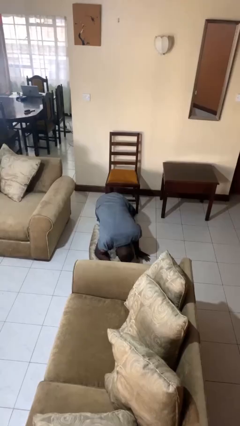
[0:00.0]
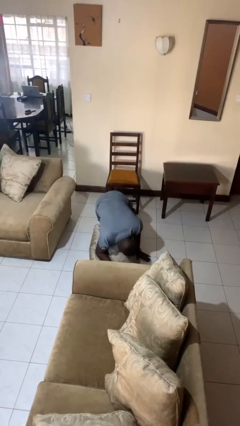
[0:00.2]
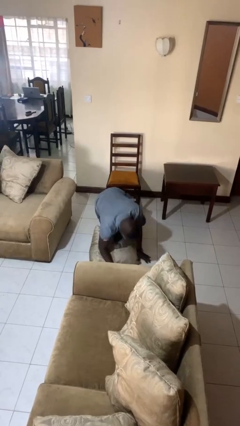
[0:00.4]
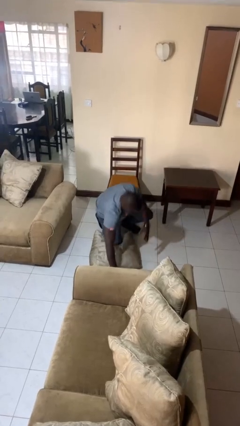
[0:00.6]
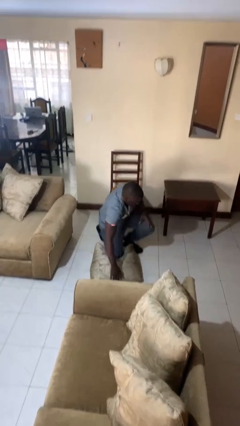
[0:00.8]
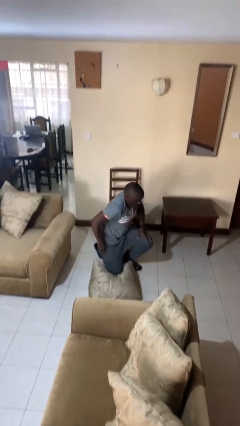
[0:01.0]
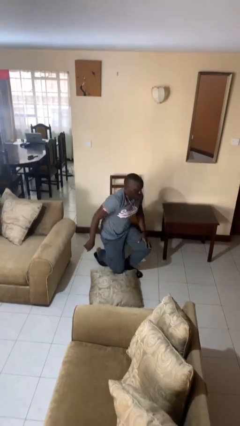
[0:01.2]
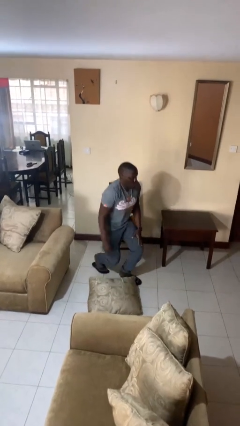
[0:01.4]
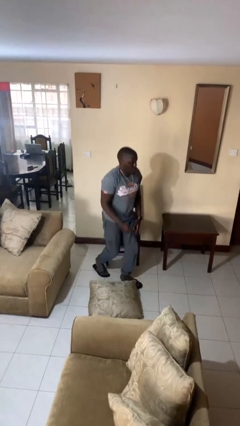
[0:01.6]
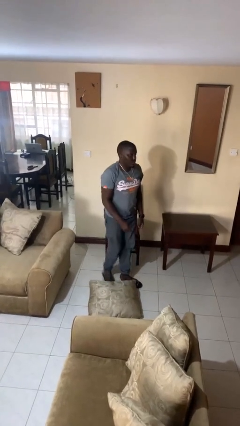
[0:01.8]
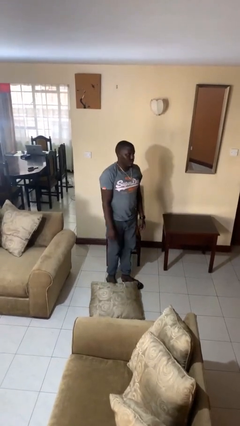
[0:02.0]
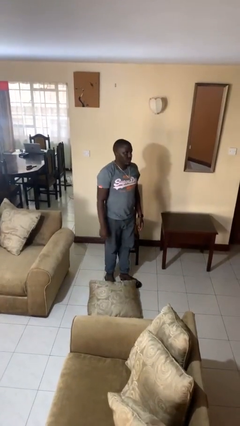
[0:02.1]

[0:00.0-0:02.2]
person stands up from floor

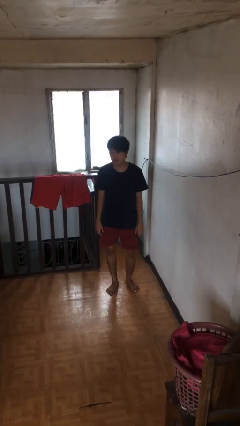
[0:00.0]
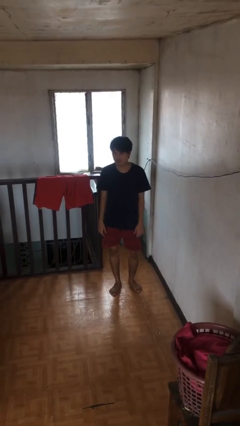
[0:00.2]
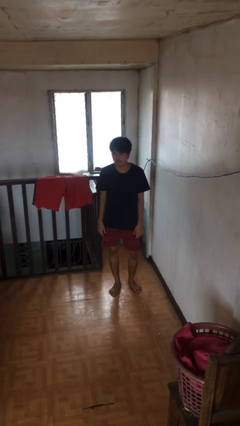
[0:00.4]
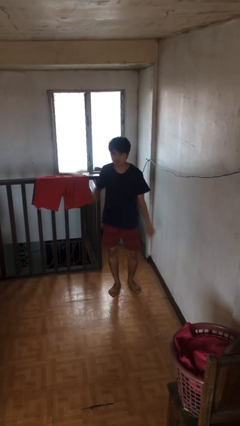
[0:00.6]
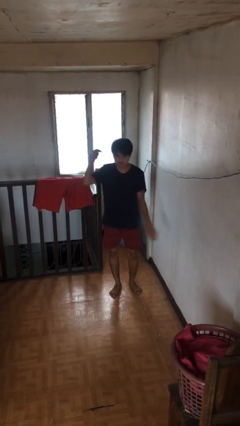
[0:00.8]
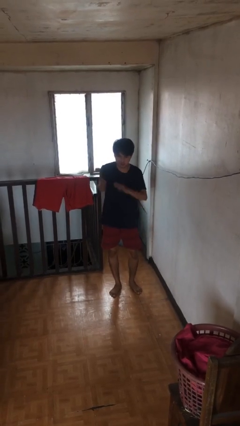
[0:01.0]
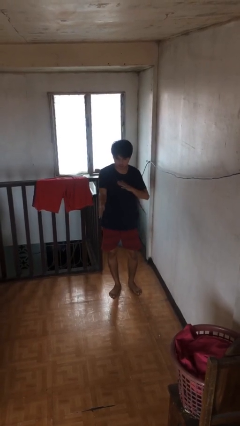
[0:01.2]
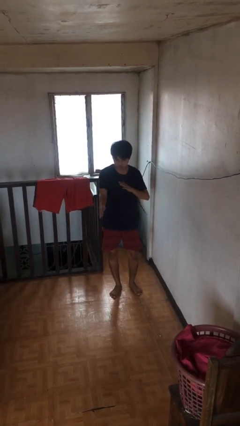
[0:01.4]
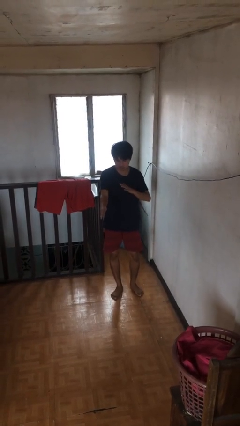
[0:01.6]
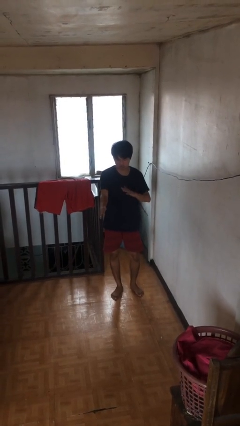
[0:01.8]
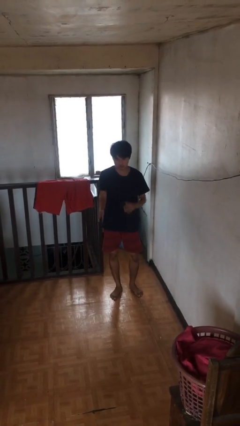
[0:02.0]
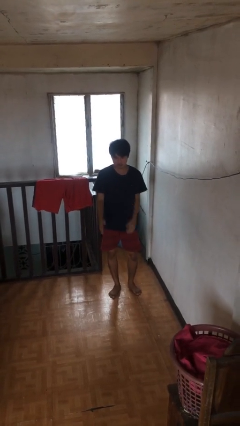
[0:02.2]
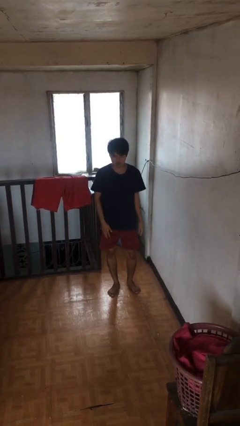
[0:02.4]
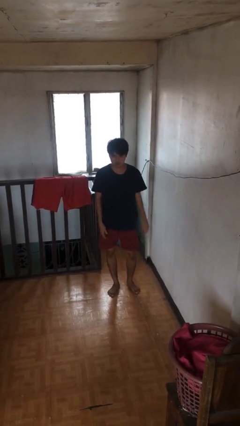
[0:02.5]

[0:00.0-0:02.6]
person karate chop

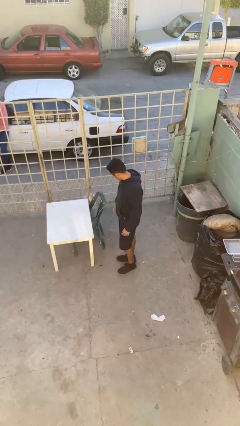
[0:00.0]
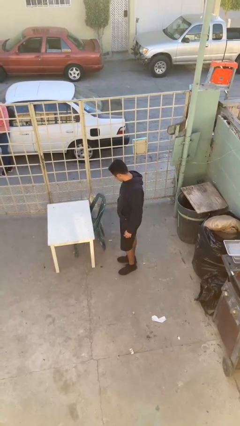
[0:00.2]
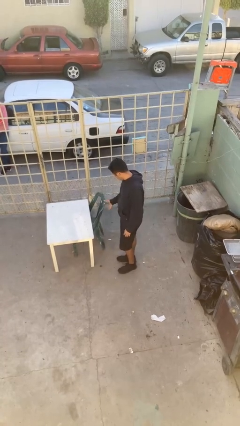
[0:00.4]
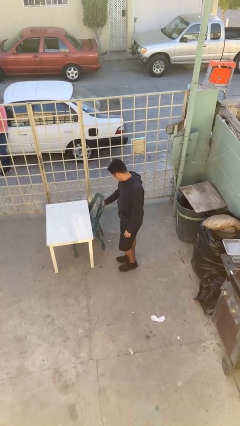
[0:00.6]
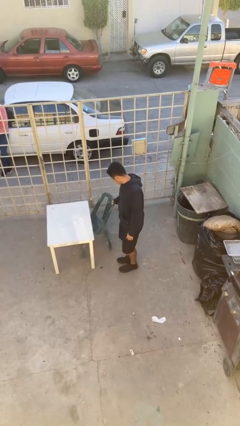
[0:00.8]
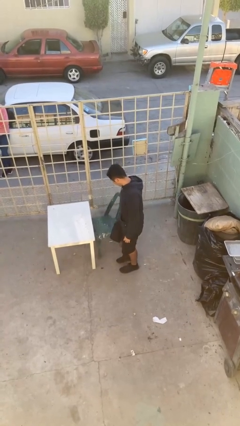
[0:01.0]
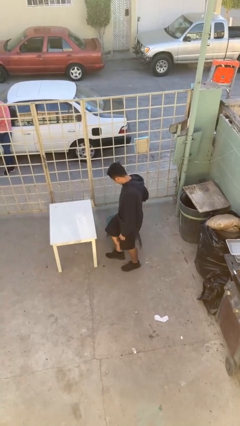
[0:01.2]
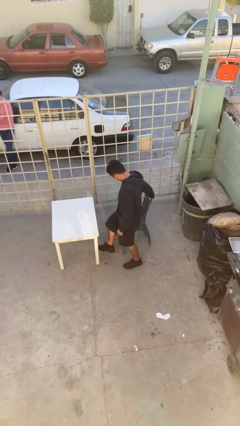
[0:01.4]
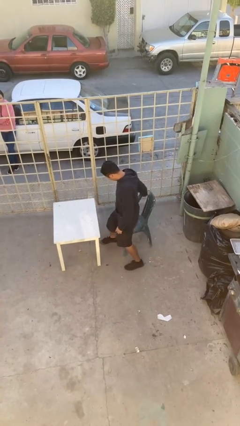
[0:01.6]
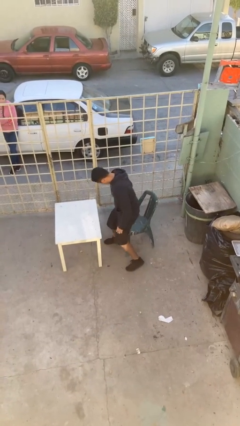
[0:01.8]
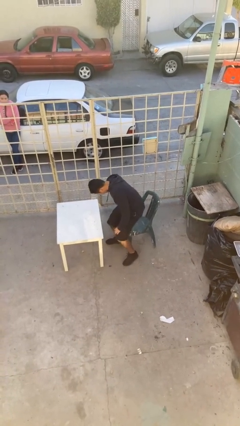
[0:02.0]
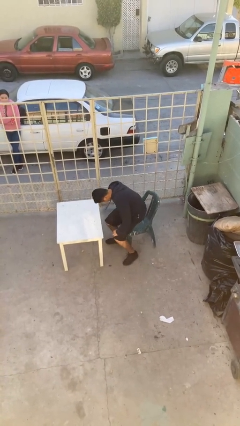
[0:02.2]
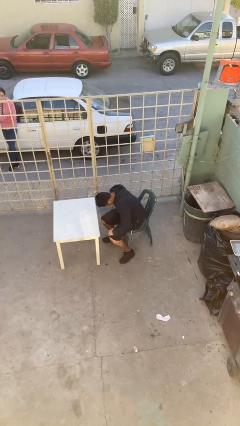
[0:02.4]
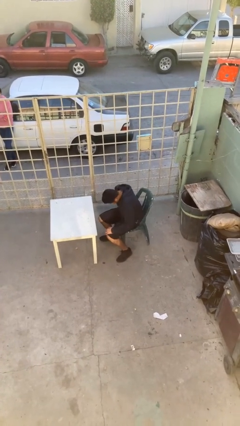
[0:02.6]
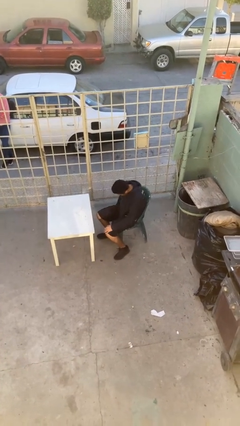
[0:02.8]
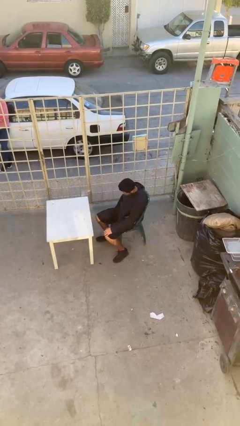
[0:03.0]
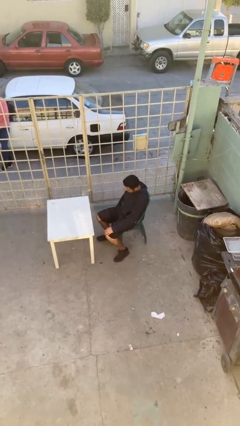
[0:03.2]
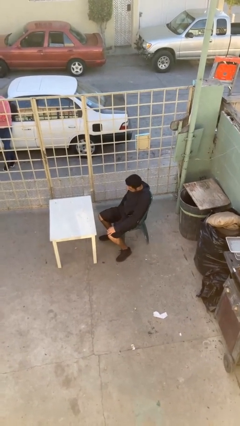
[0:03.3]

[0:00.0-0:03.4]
person sits down

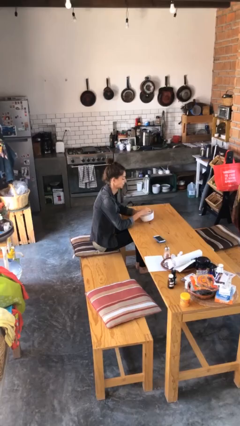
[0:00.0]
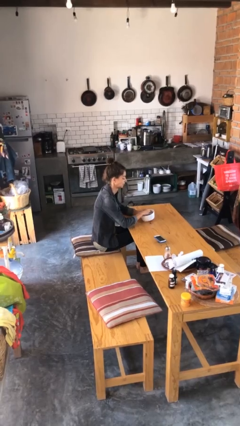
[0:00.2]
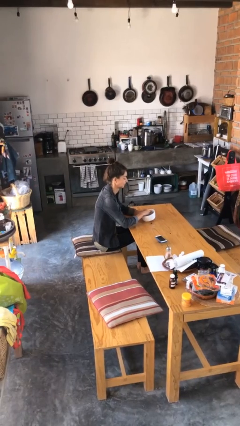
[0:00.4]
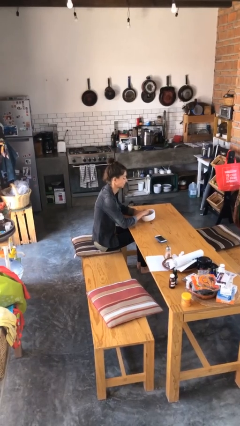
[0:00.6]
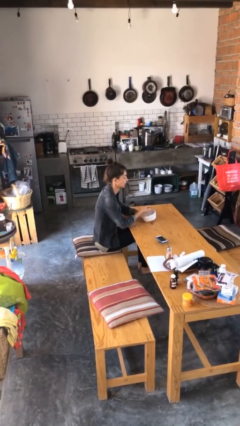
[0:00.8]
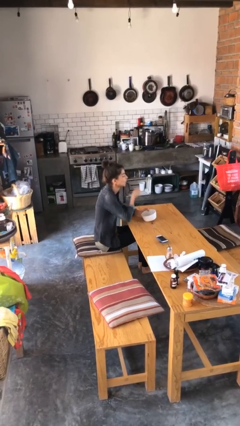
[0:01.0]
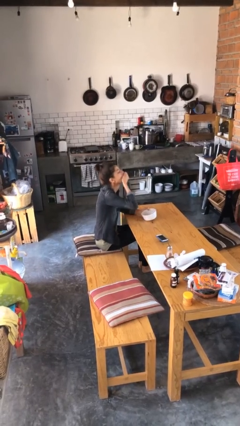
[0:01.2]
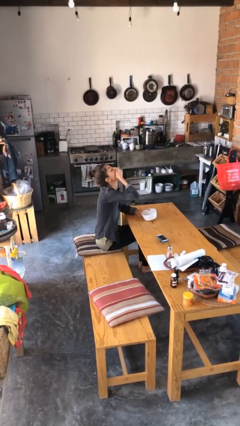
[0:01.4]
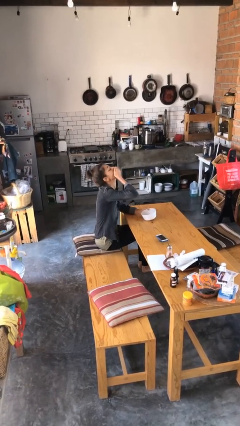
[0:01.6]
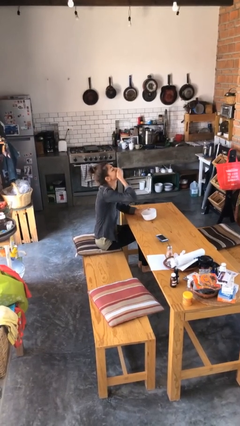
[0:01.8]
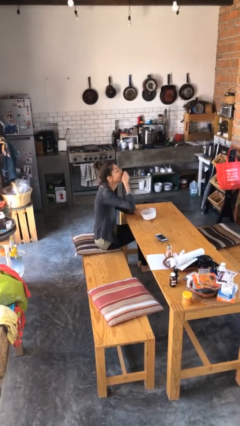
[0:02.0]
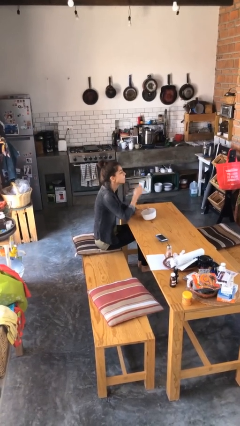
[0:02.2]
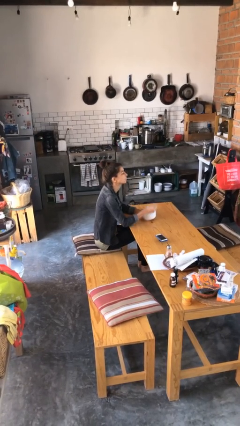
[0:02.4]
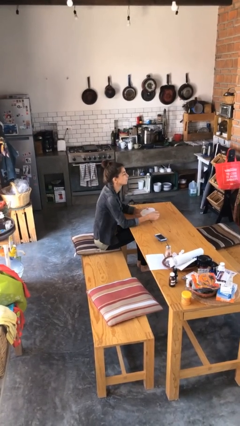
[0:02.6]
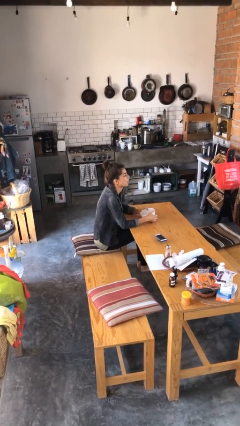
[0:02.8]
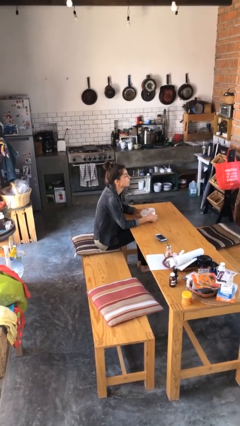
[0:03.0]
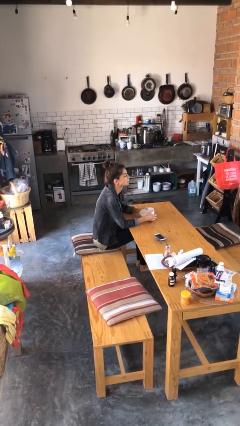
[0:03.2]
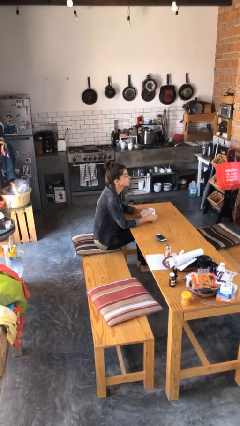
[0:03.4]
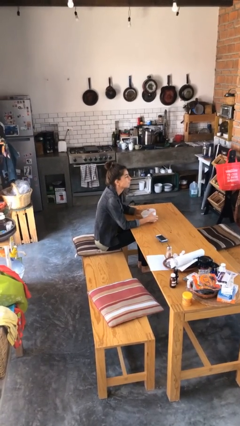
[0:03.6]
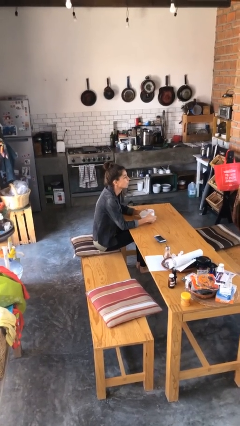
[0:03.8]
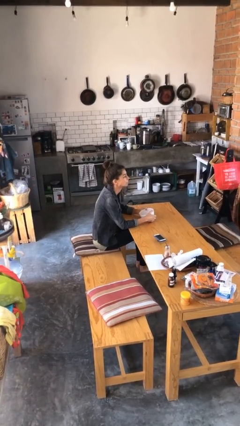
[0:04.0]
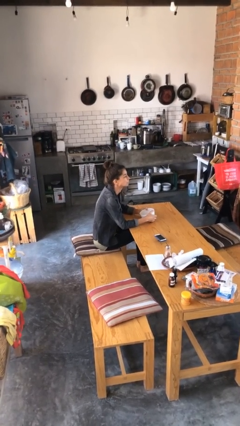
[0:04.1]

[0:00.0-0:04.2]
person eats with hands

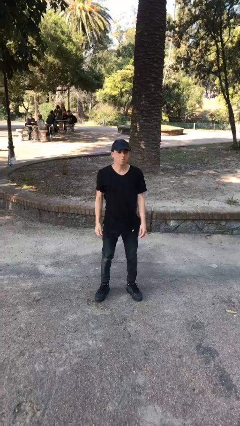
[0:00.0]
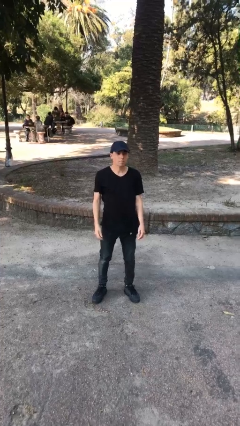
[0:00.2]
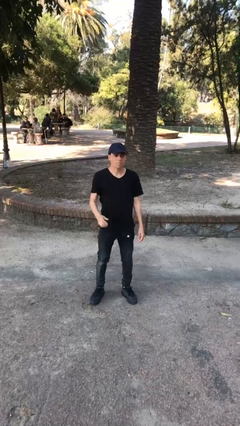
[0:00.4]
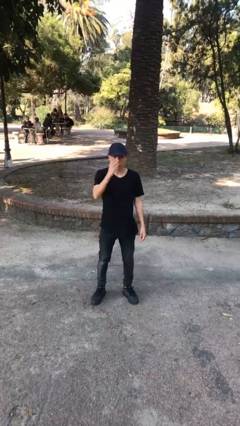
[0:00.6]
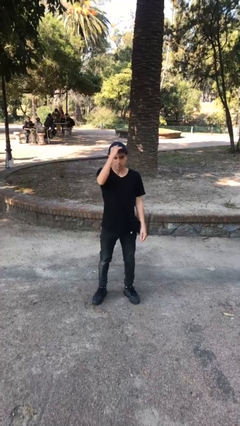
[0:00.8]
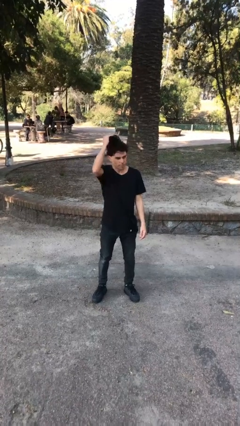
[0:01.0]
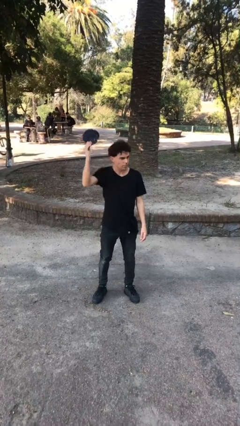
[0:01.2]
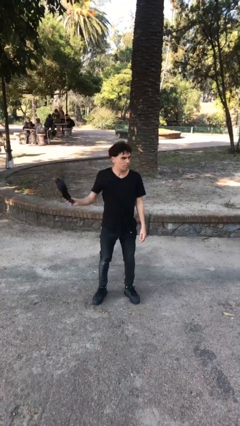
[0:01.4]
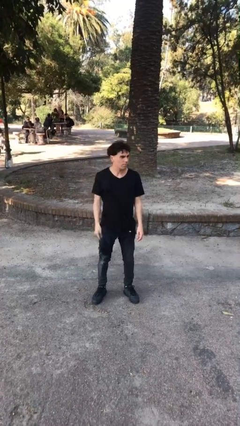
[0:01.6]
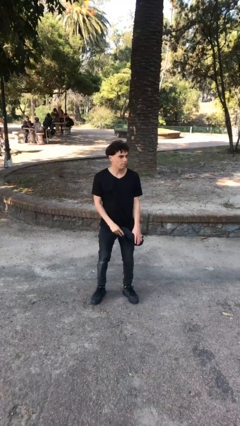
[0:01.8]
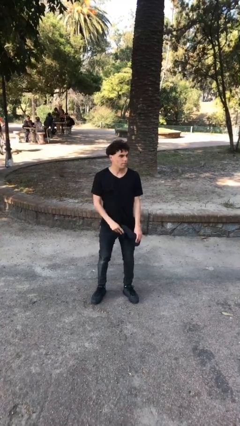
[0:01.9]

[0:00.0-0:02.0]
person takes off hat

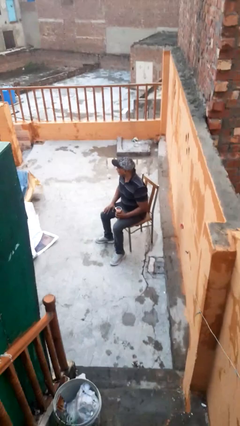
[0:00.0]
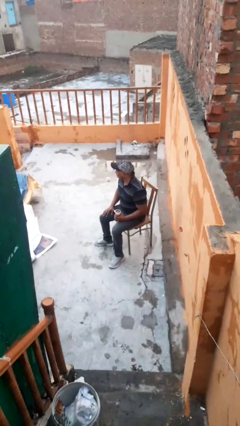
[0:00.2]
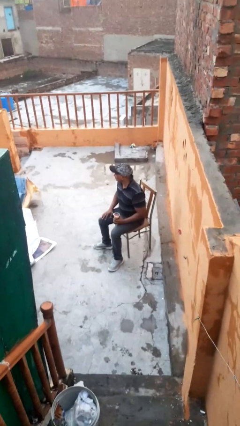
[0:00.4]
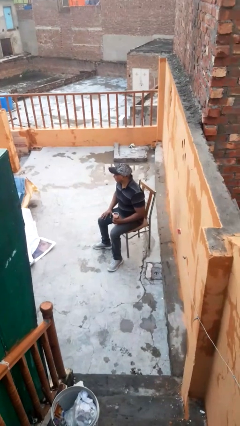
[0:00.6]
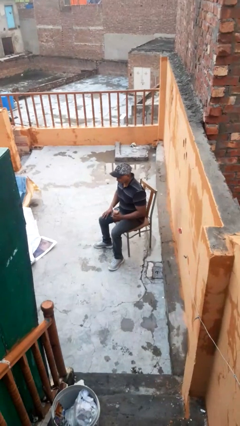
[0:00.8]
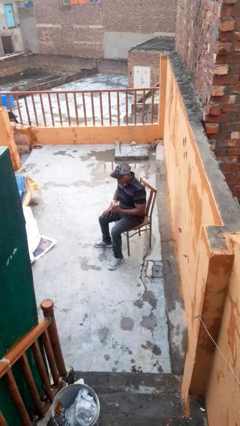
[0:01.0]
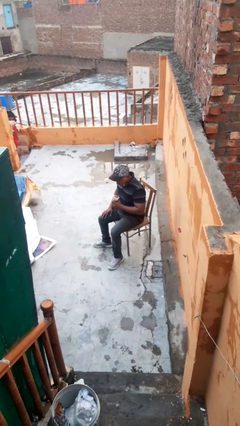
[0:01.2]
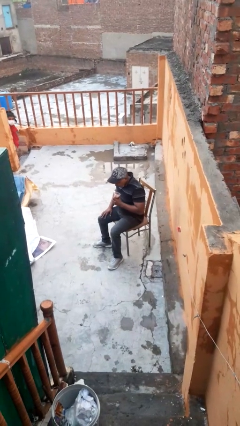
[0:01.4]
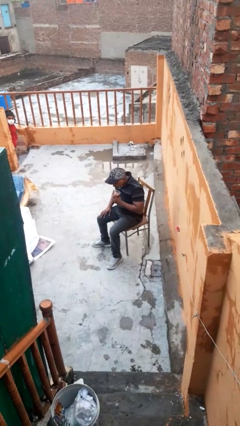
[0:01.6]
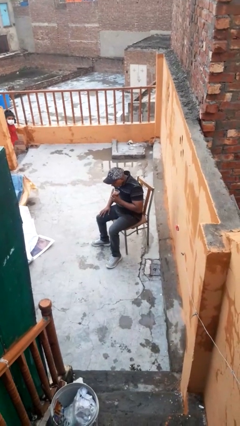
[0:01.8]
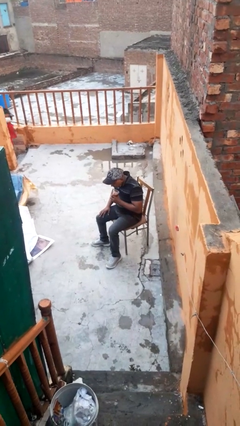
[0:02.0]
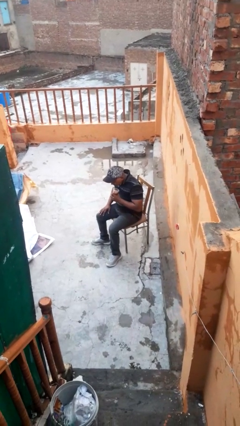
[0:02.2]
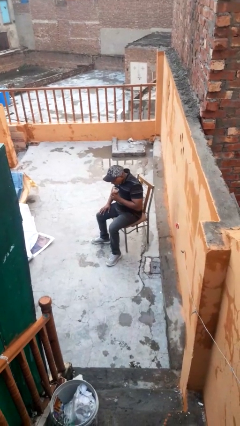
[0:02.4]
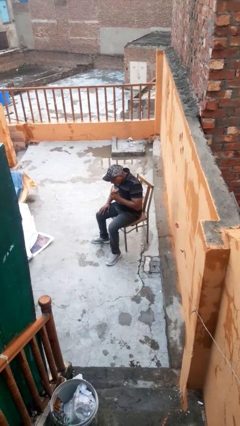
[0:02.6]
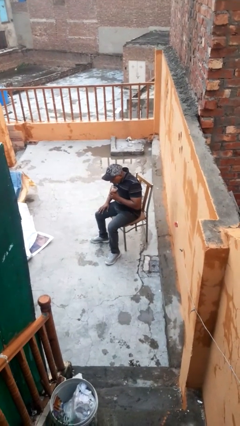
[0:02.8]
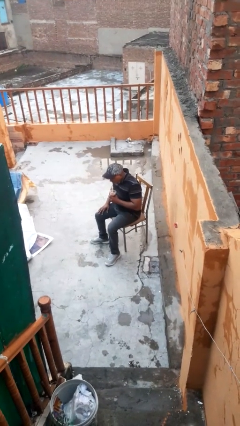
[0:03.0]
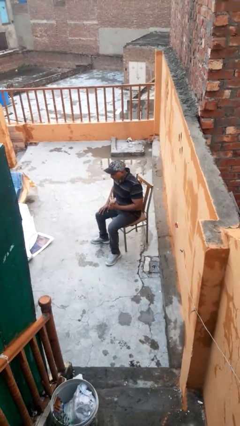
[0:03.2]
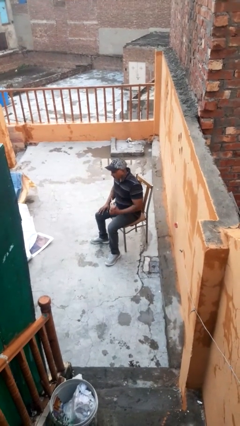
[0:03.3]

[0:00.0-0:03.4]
person drinks from straw
